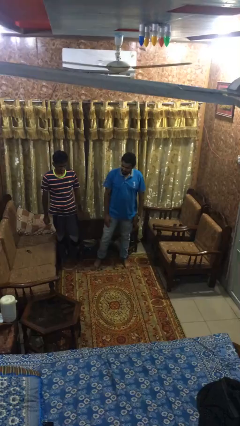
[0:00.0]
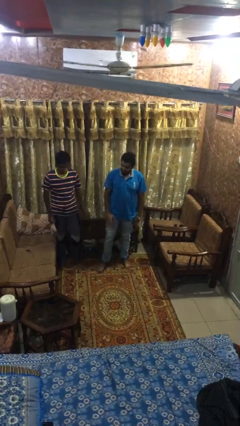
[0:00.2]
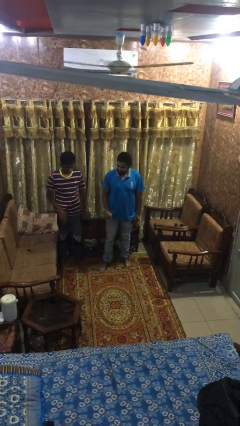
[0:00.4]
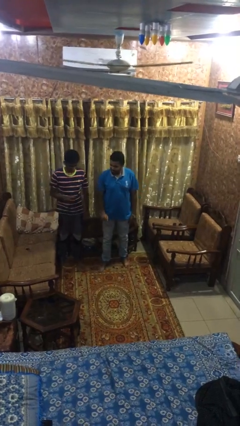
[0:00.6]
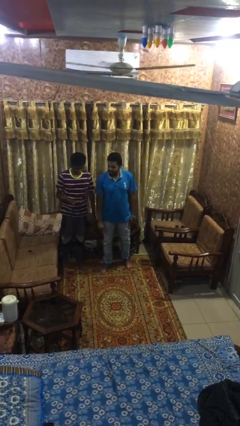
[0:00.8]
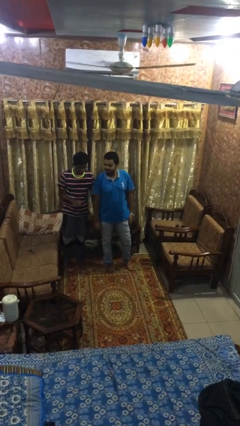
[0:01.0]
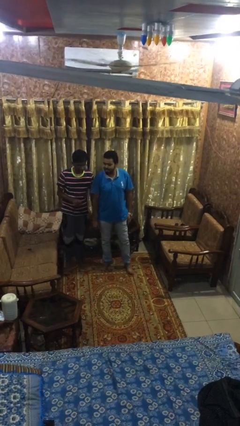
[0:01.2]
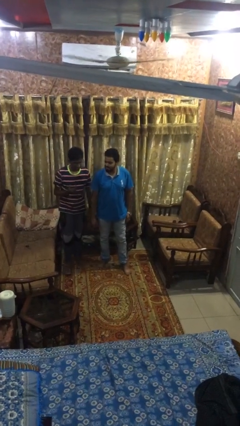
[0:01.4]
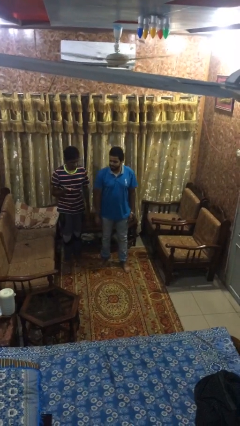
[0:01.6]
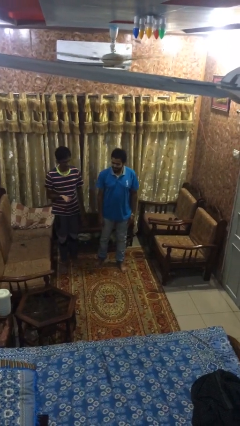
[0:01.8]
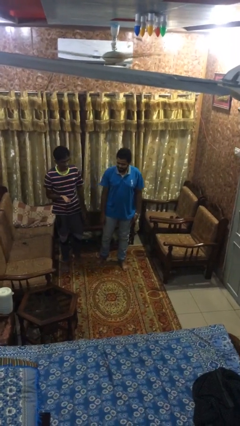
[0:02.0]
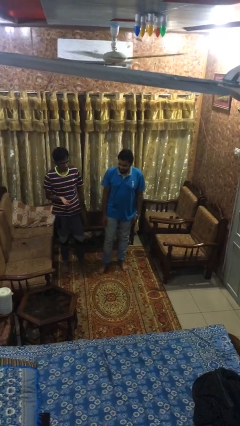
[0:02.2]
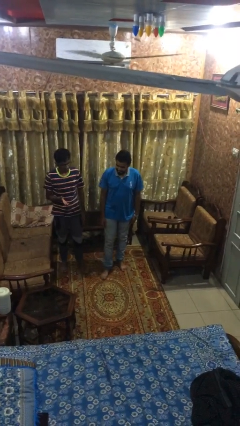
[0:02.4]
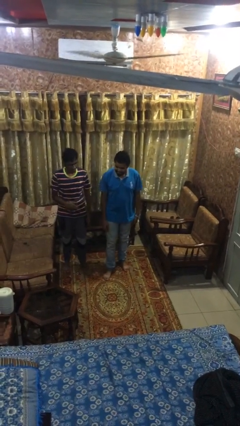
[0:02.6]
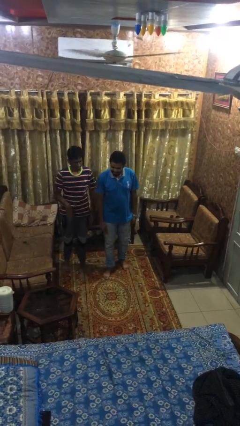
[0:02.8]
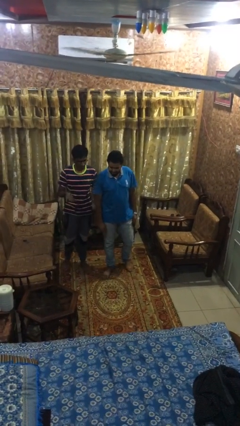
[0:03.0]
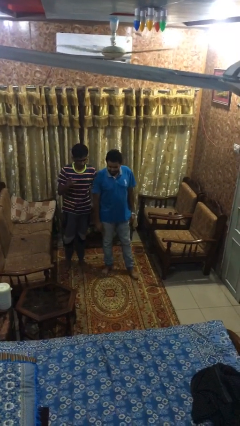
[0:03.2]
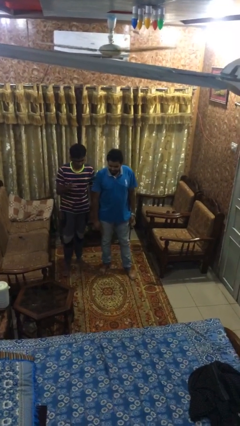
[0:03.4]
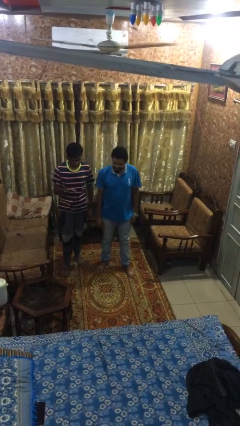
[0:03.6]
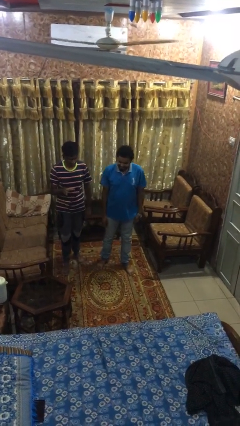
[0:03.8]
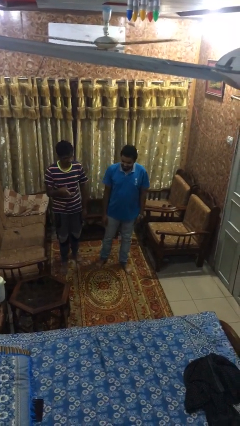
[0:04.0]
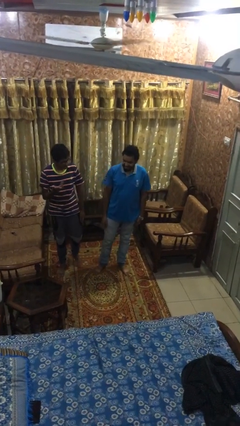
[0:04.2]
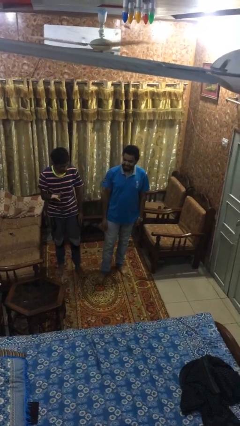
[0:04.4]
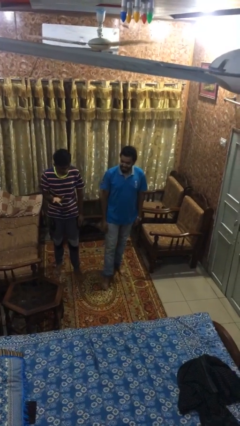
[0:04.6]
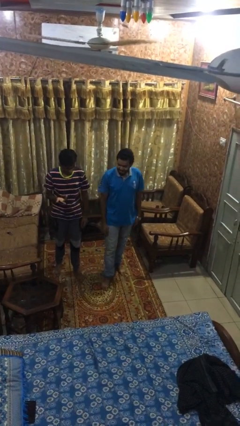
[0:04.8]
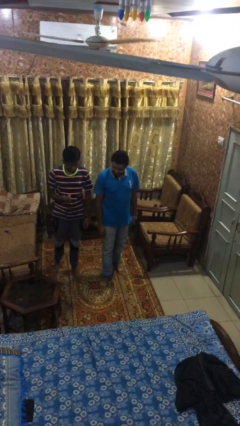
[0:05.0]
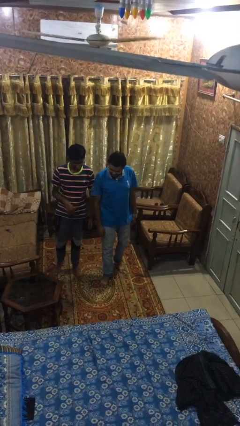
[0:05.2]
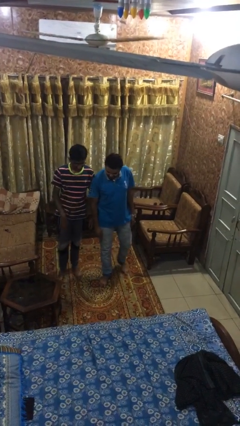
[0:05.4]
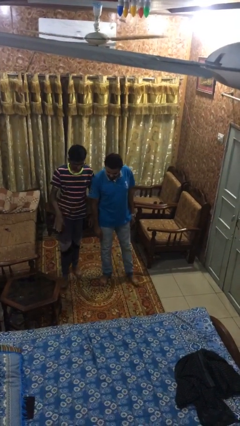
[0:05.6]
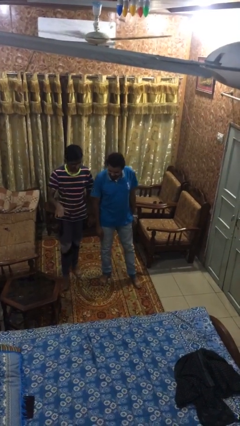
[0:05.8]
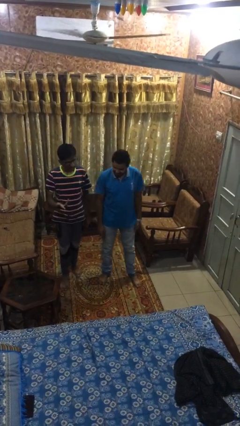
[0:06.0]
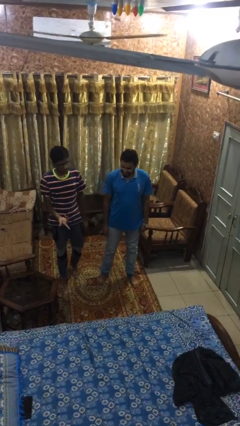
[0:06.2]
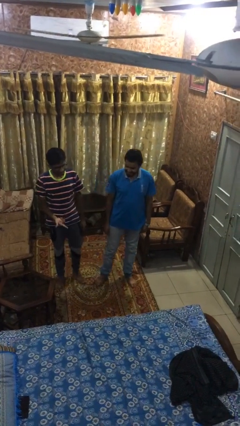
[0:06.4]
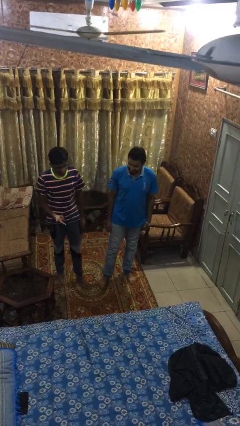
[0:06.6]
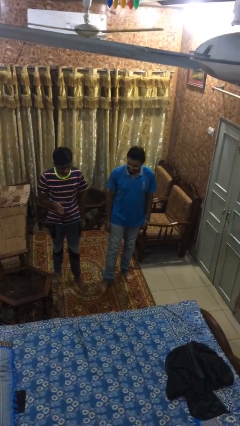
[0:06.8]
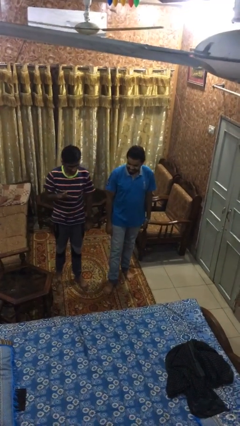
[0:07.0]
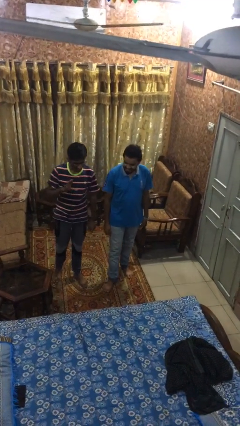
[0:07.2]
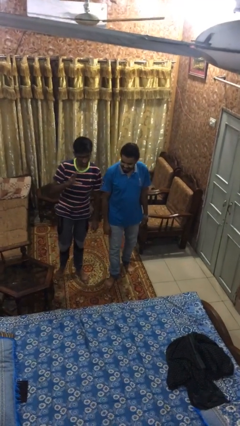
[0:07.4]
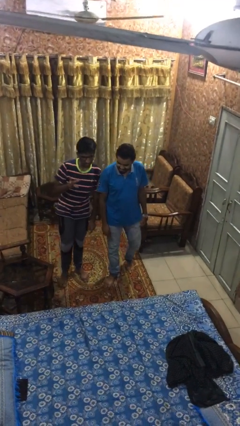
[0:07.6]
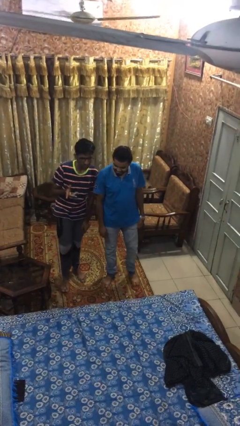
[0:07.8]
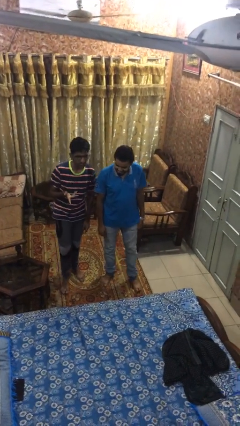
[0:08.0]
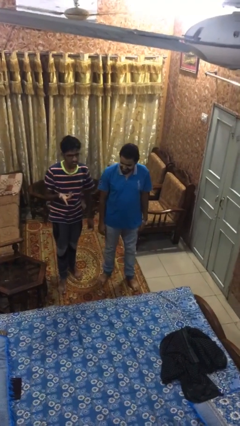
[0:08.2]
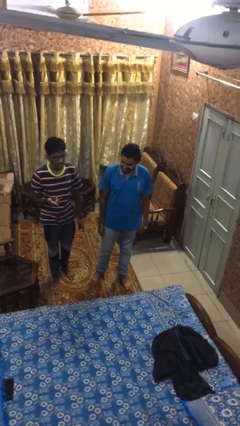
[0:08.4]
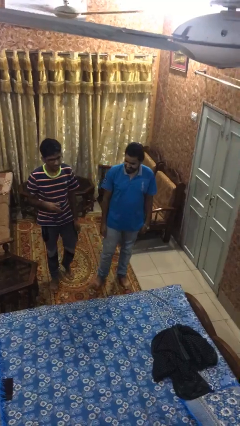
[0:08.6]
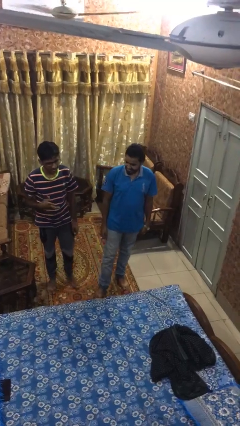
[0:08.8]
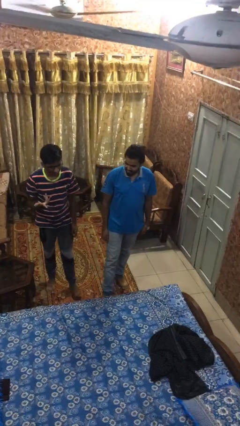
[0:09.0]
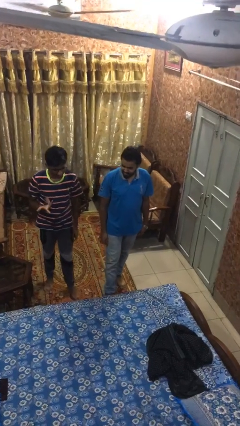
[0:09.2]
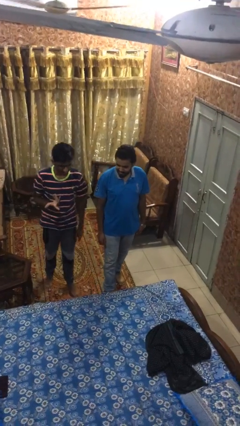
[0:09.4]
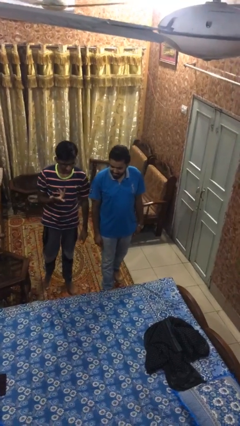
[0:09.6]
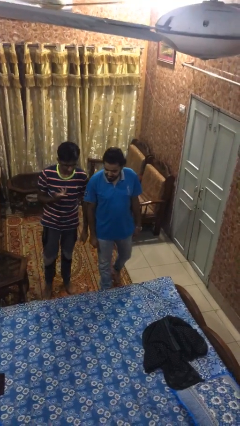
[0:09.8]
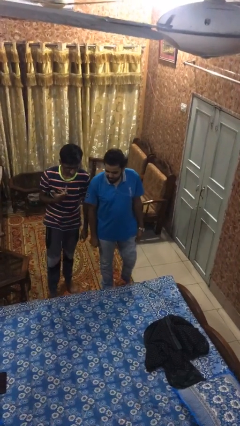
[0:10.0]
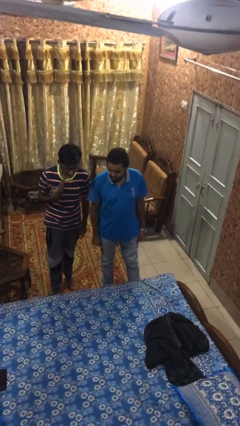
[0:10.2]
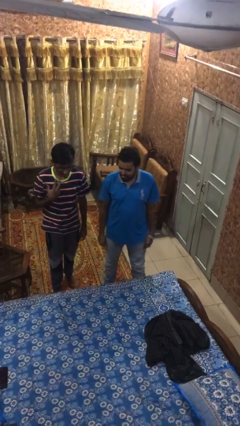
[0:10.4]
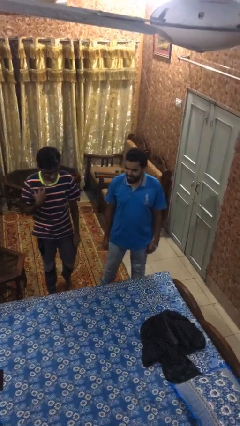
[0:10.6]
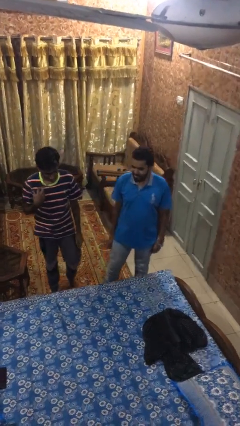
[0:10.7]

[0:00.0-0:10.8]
person talks to person

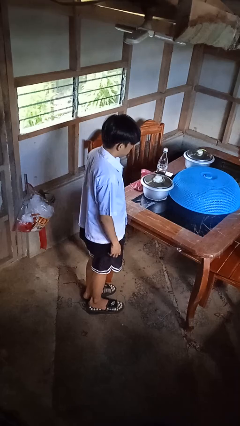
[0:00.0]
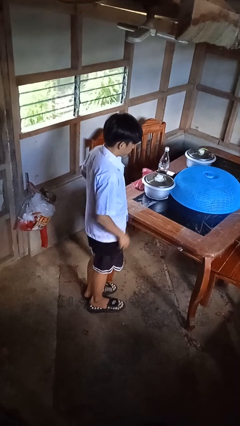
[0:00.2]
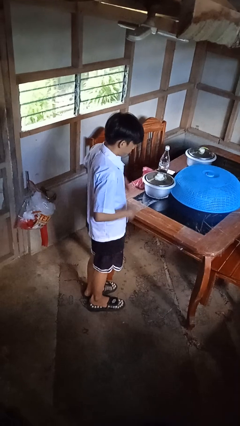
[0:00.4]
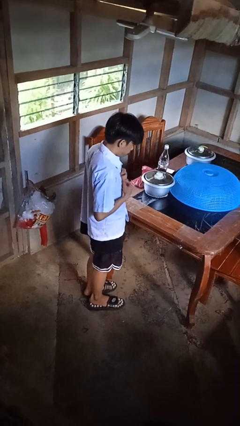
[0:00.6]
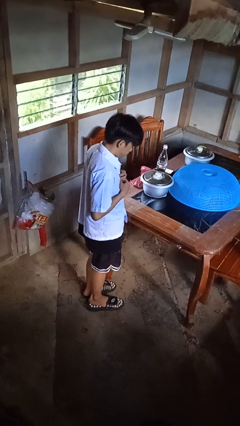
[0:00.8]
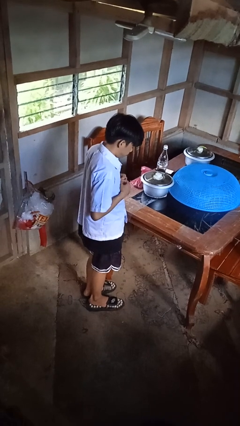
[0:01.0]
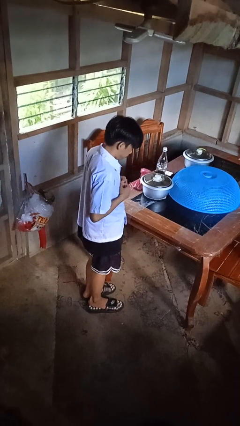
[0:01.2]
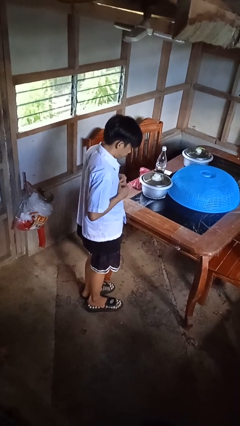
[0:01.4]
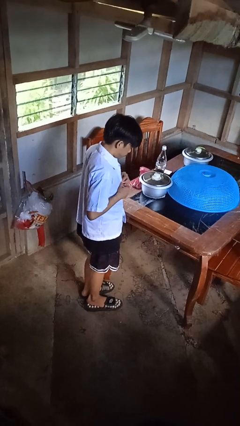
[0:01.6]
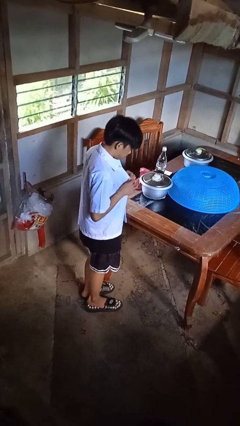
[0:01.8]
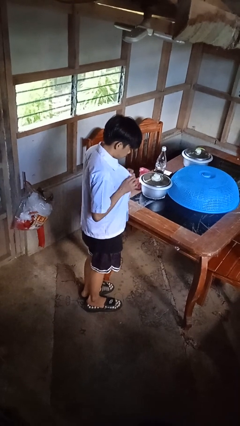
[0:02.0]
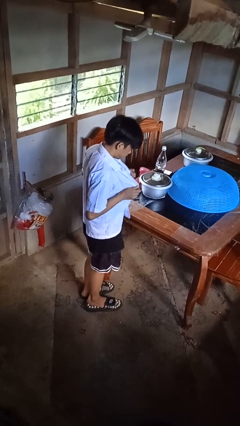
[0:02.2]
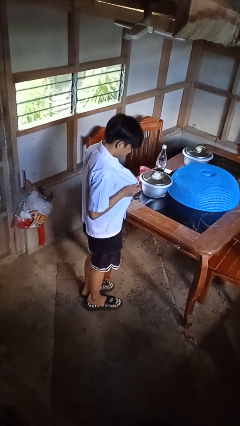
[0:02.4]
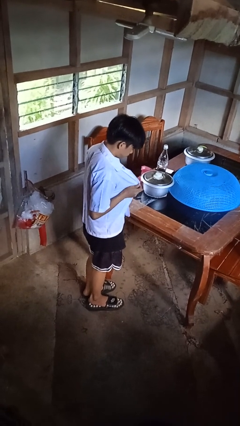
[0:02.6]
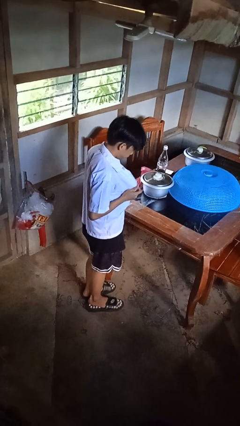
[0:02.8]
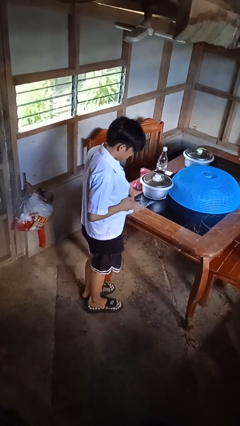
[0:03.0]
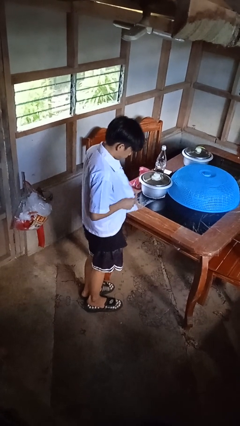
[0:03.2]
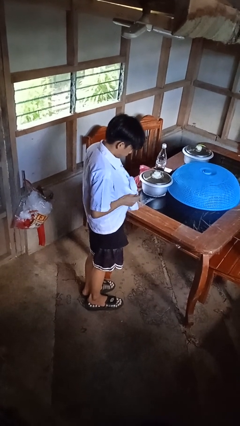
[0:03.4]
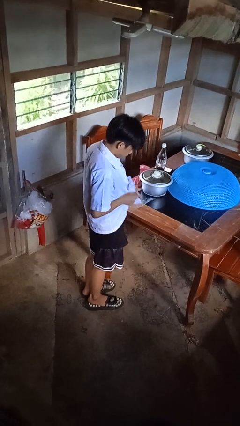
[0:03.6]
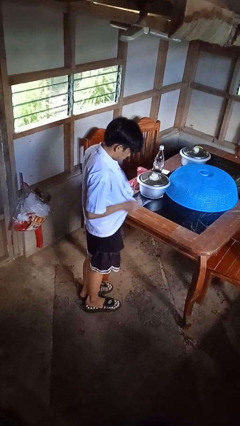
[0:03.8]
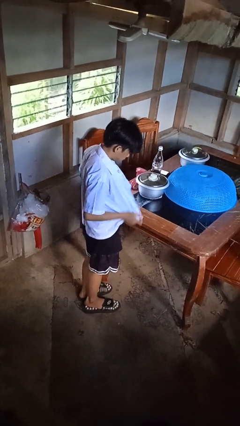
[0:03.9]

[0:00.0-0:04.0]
person unbuttons shirt

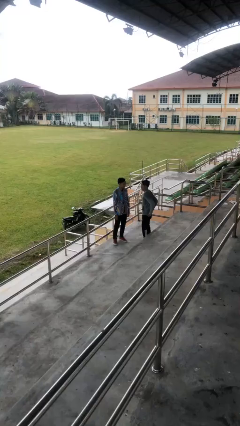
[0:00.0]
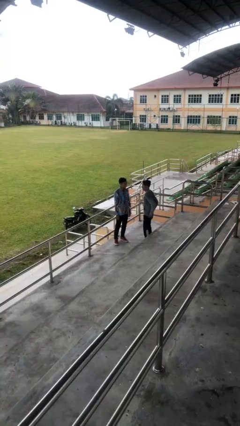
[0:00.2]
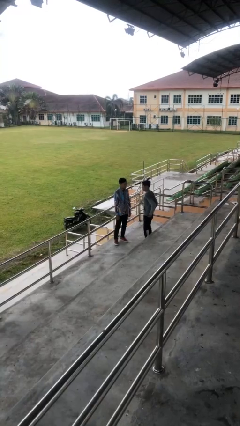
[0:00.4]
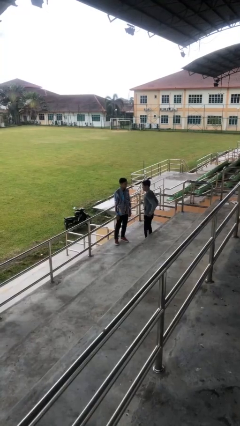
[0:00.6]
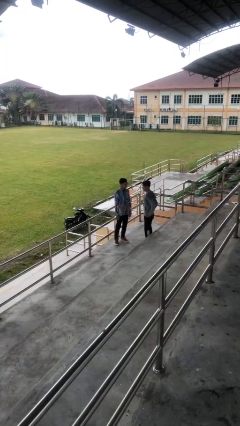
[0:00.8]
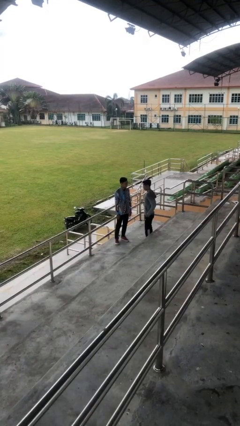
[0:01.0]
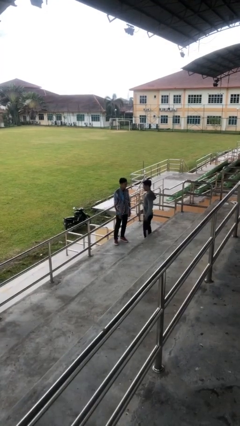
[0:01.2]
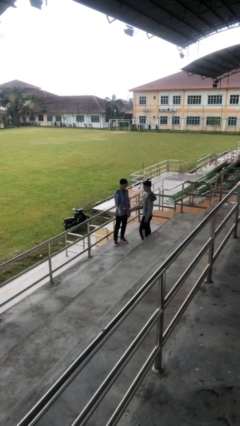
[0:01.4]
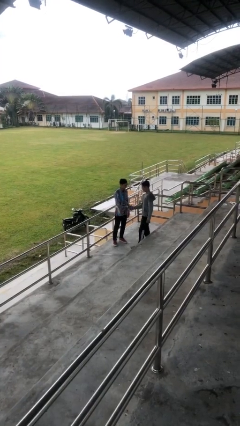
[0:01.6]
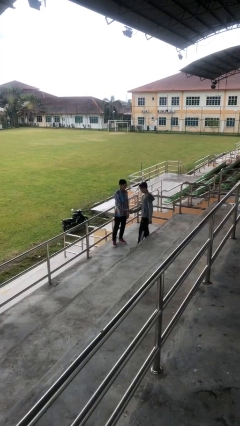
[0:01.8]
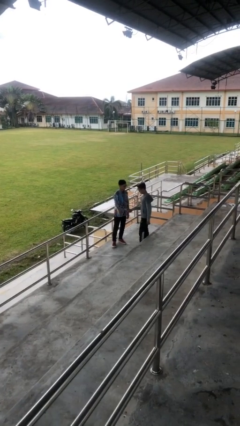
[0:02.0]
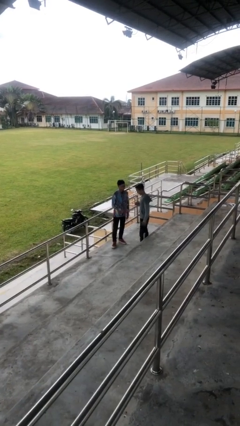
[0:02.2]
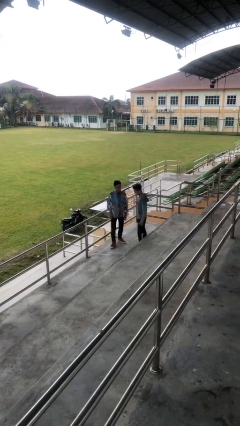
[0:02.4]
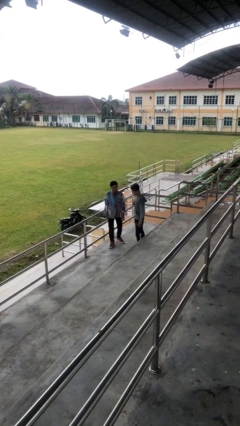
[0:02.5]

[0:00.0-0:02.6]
person shakes hand

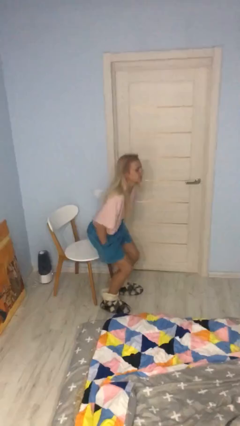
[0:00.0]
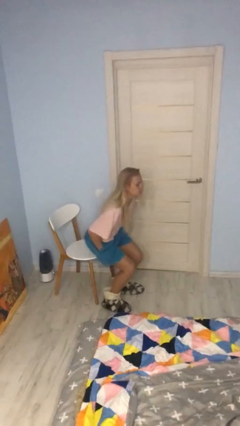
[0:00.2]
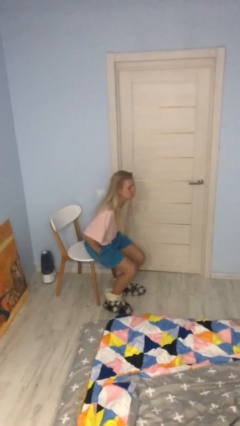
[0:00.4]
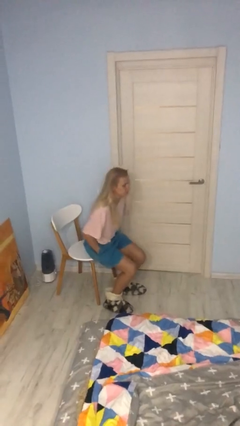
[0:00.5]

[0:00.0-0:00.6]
person sits down
